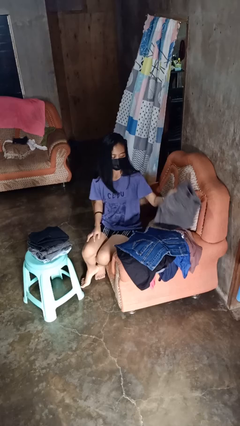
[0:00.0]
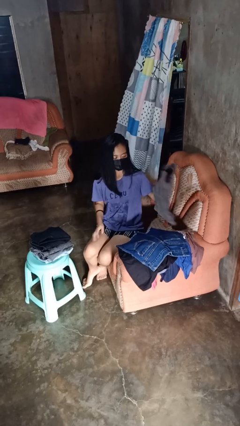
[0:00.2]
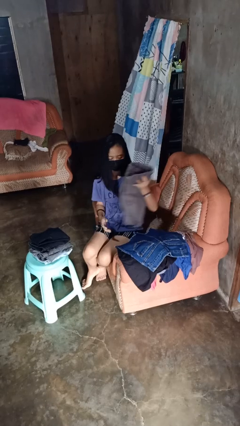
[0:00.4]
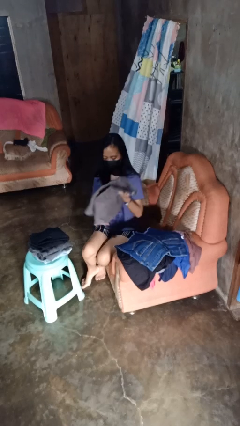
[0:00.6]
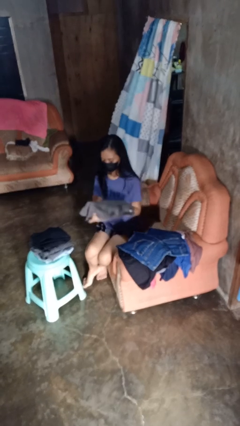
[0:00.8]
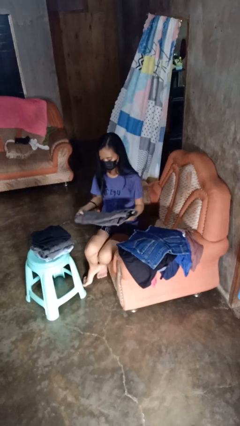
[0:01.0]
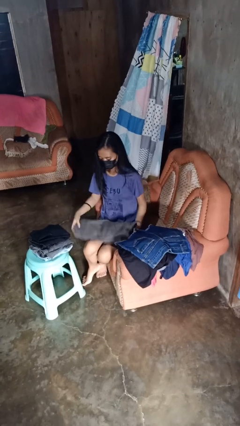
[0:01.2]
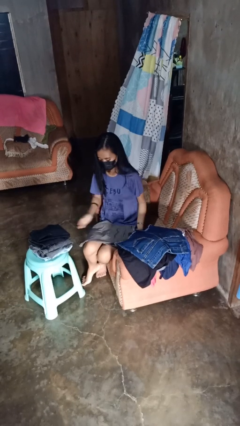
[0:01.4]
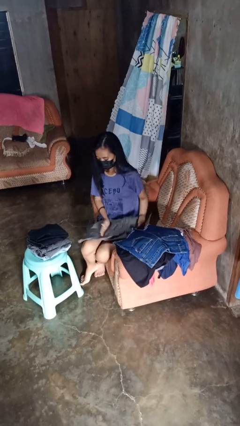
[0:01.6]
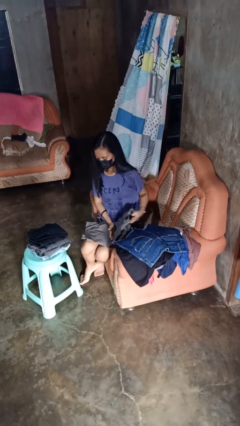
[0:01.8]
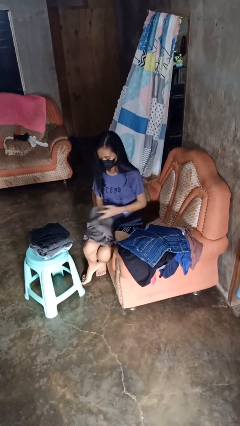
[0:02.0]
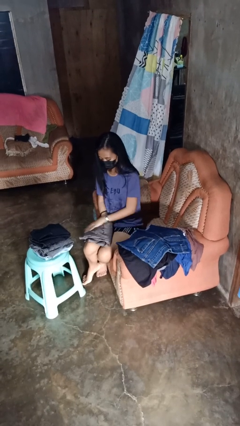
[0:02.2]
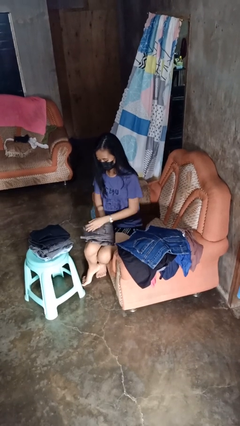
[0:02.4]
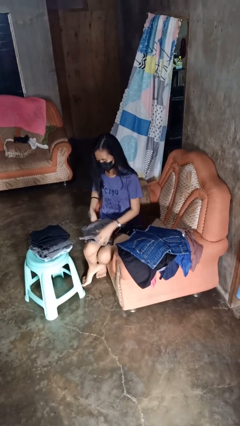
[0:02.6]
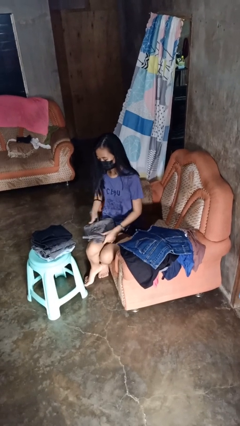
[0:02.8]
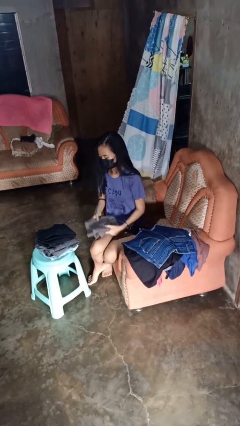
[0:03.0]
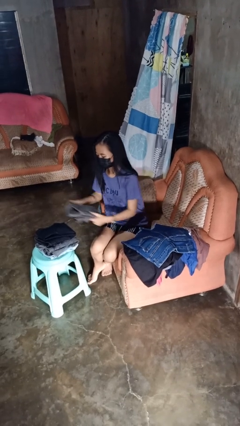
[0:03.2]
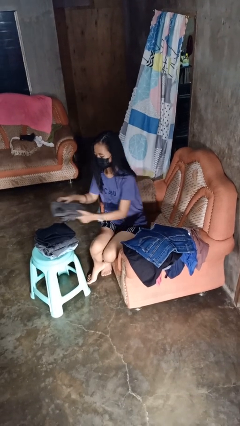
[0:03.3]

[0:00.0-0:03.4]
person folds pants

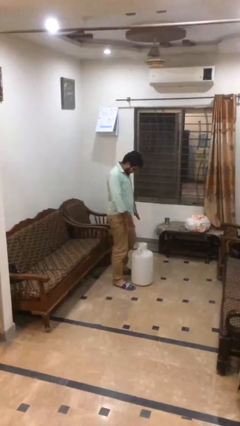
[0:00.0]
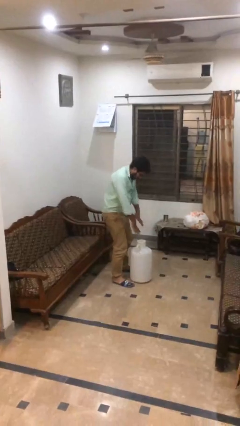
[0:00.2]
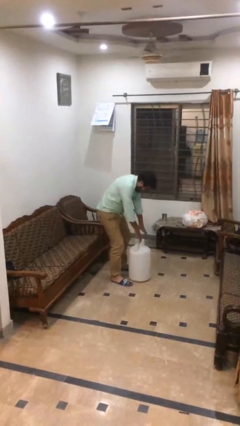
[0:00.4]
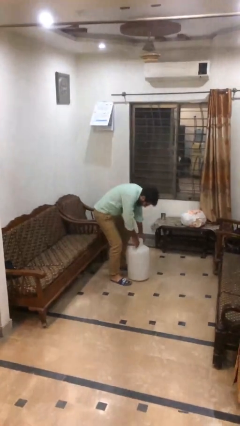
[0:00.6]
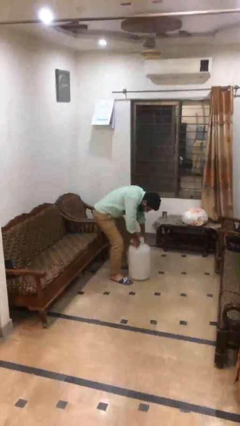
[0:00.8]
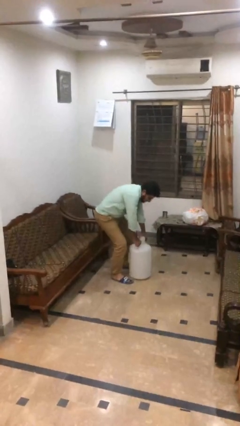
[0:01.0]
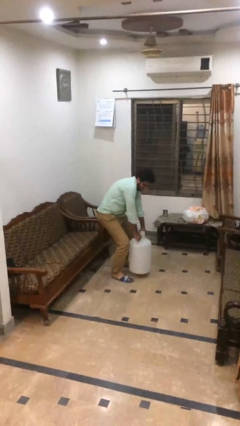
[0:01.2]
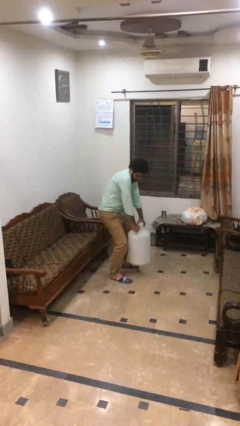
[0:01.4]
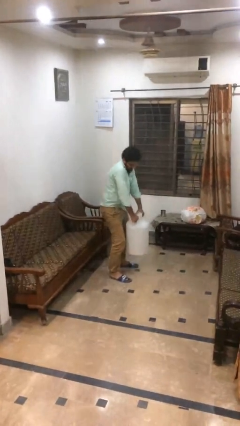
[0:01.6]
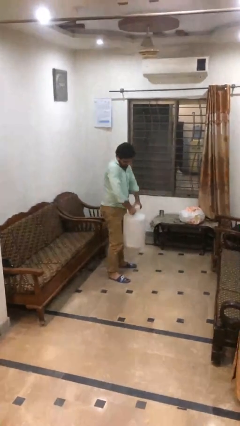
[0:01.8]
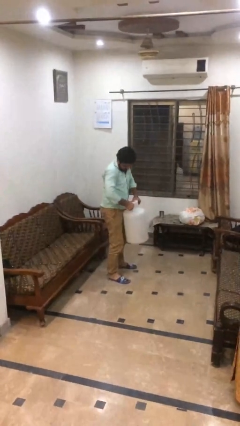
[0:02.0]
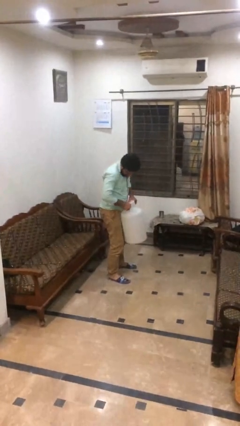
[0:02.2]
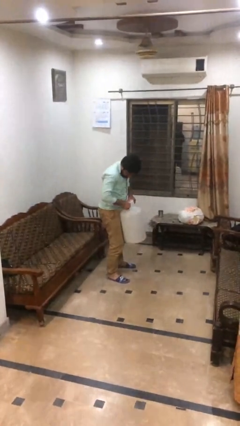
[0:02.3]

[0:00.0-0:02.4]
person picks up object from floor

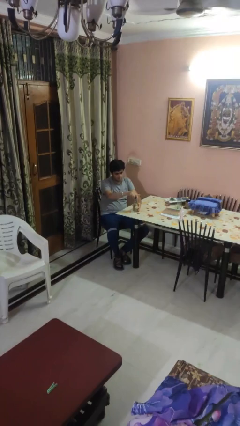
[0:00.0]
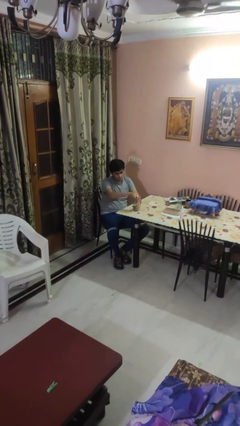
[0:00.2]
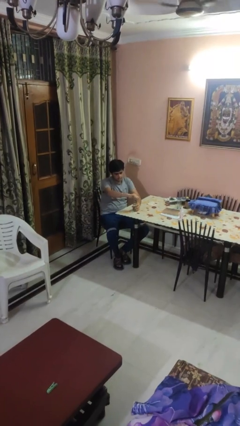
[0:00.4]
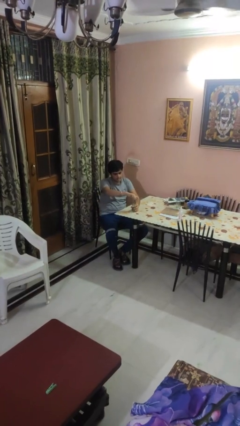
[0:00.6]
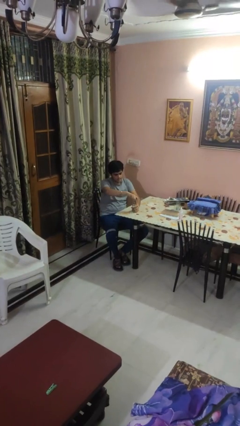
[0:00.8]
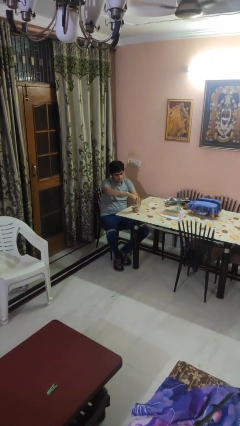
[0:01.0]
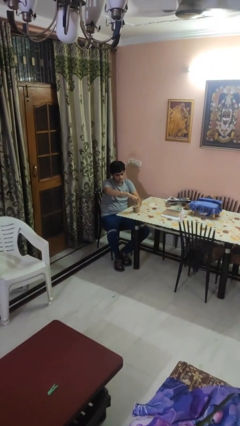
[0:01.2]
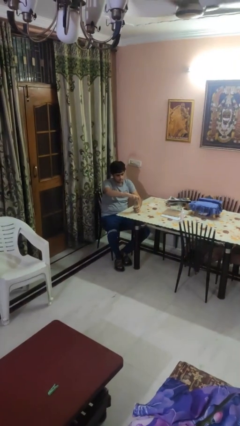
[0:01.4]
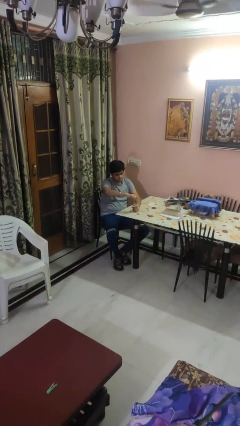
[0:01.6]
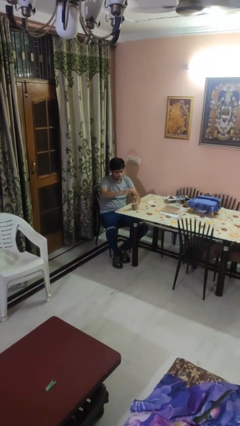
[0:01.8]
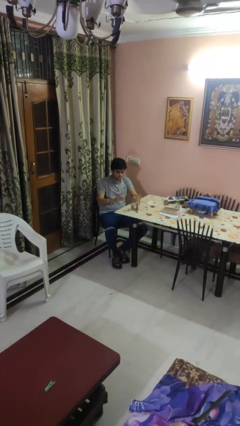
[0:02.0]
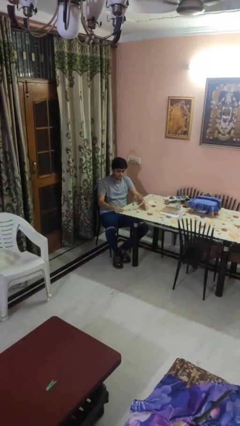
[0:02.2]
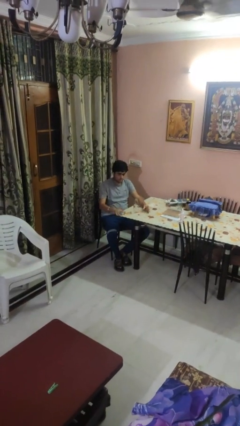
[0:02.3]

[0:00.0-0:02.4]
person unscrews lid from bottle

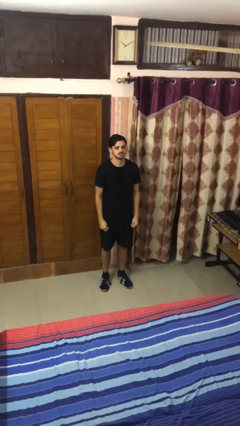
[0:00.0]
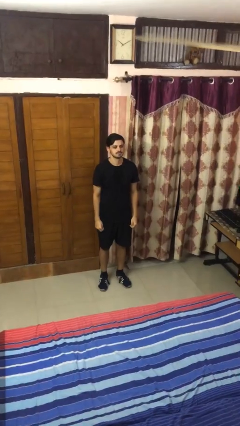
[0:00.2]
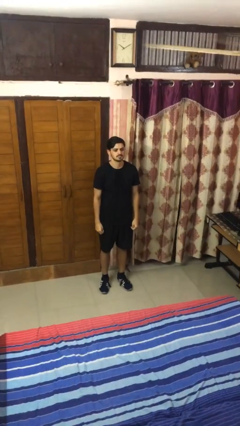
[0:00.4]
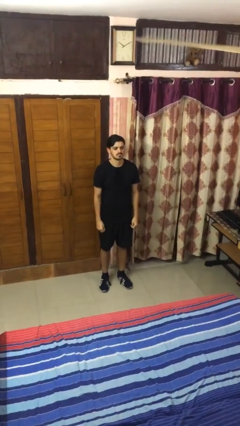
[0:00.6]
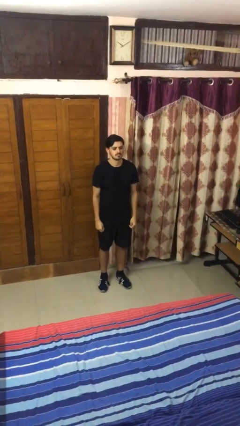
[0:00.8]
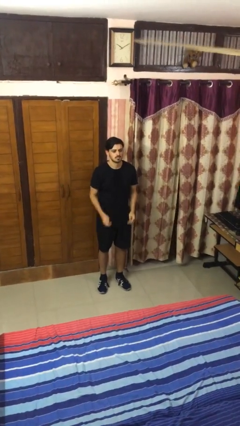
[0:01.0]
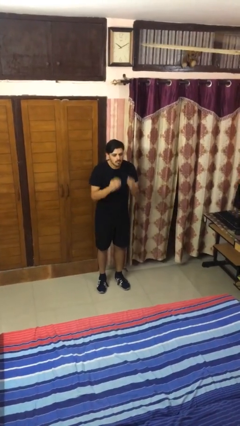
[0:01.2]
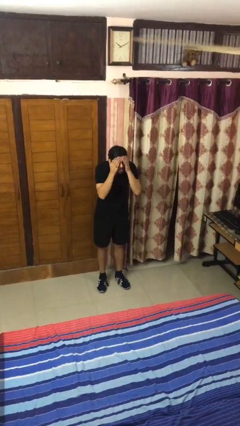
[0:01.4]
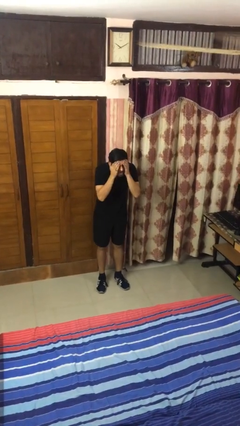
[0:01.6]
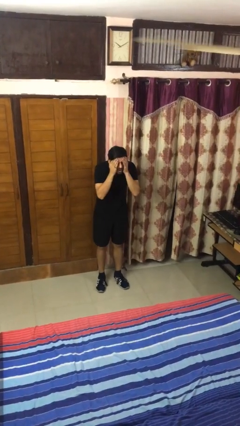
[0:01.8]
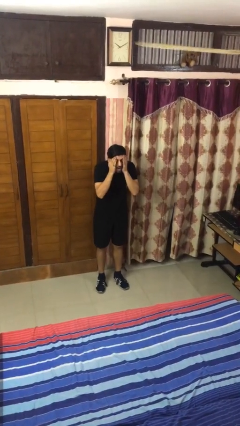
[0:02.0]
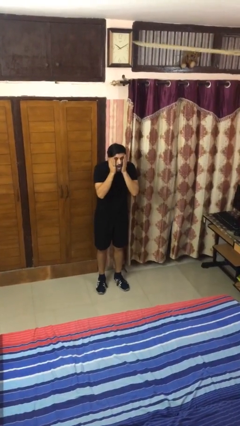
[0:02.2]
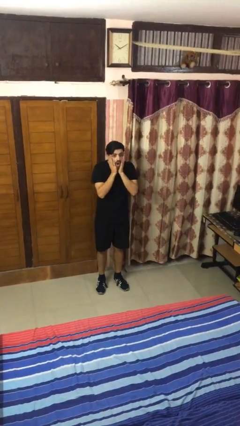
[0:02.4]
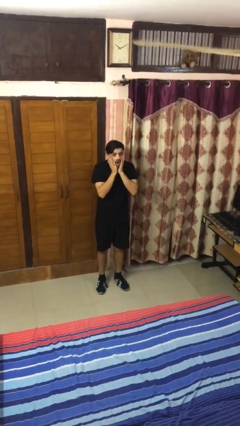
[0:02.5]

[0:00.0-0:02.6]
person covers face with hands

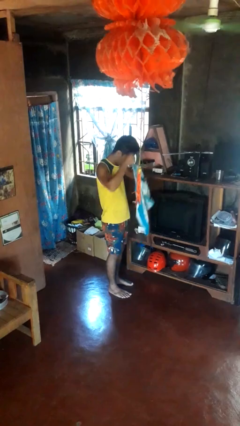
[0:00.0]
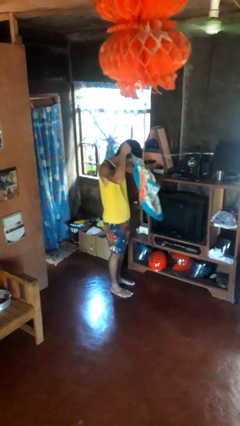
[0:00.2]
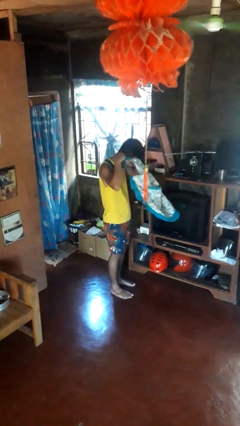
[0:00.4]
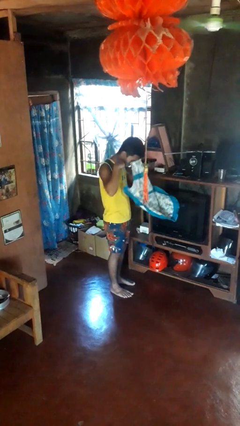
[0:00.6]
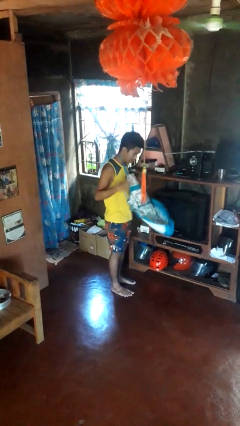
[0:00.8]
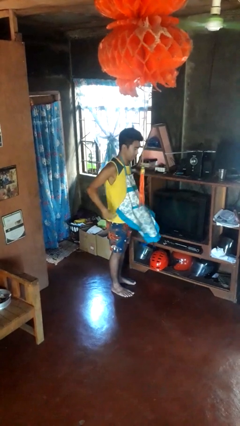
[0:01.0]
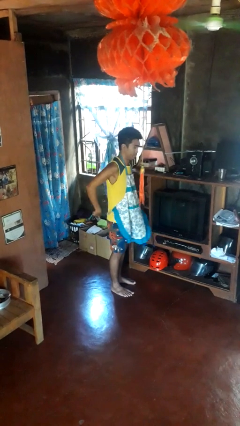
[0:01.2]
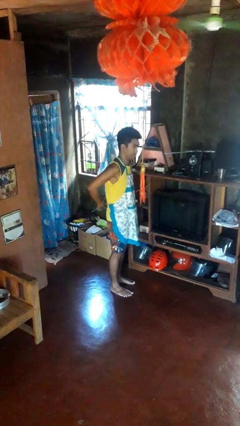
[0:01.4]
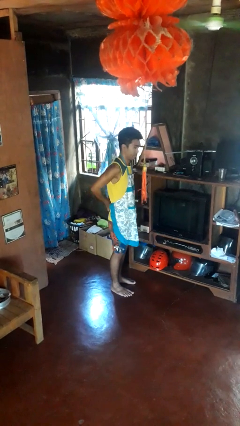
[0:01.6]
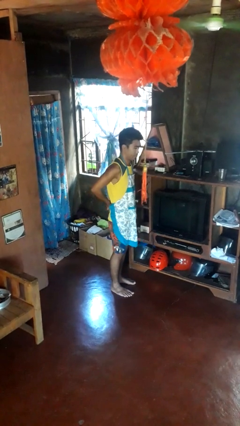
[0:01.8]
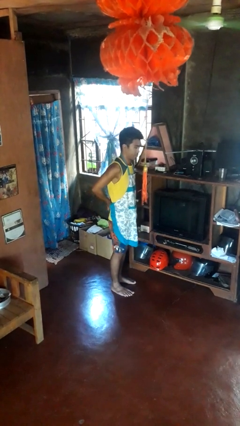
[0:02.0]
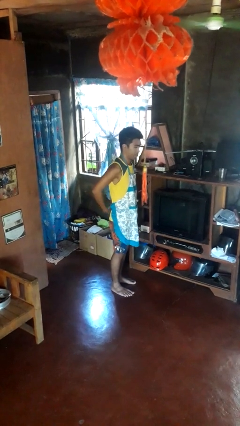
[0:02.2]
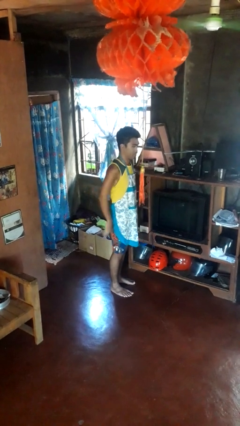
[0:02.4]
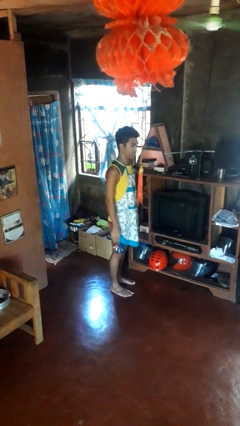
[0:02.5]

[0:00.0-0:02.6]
person puts on apron

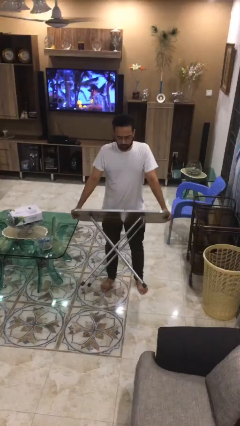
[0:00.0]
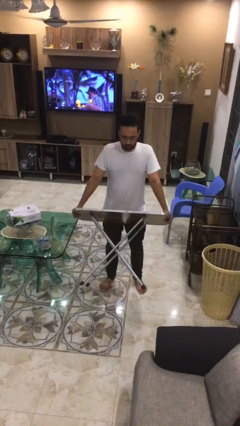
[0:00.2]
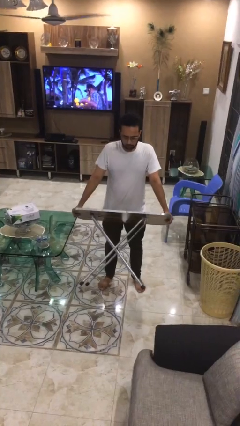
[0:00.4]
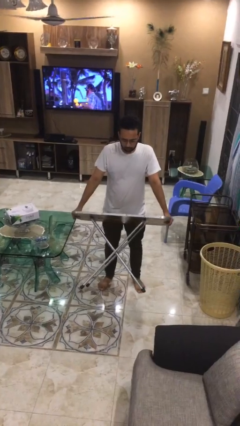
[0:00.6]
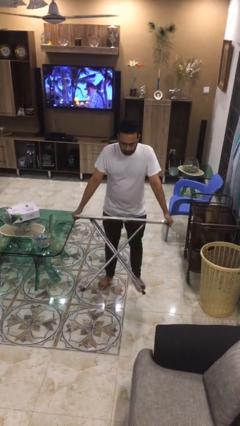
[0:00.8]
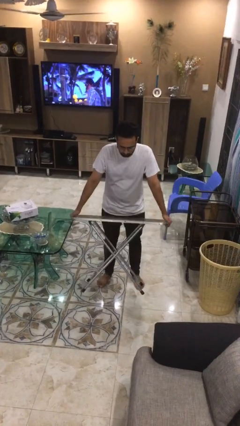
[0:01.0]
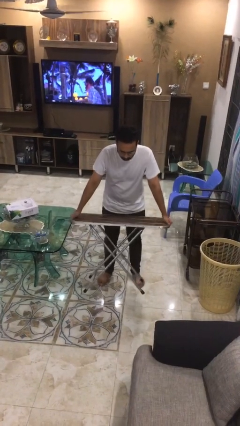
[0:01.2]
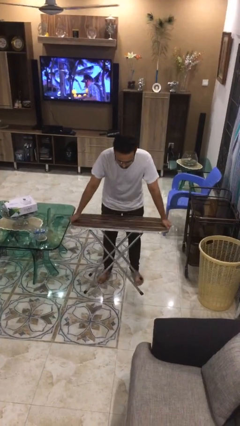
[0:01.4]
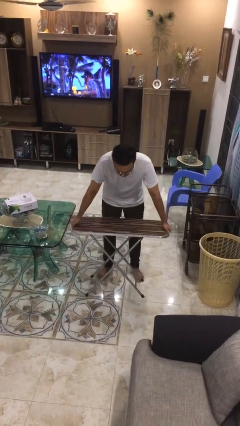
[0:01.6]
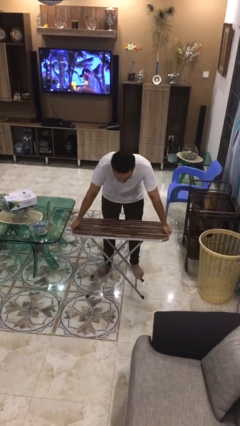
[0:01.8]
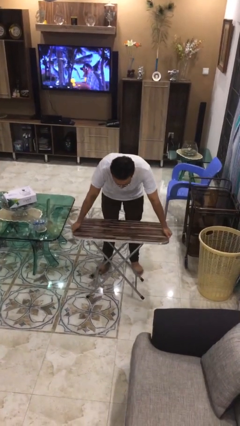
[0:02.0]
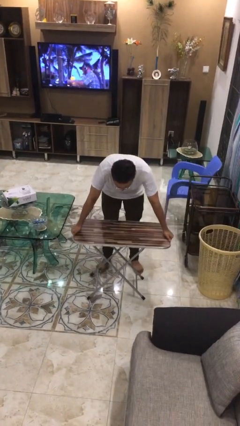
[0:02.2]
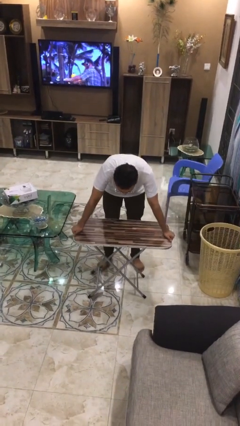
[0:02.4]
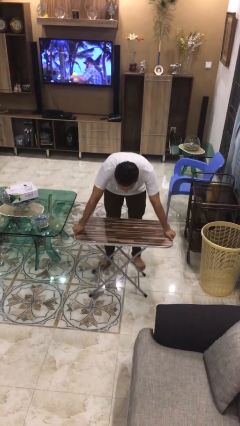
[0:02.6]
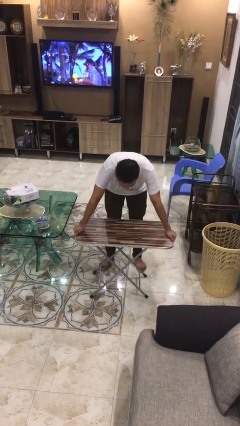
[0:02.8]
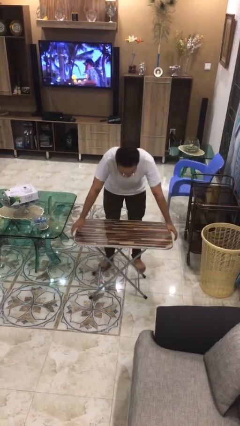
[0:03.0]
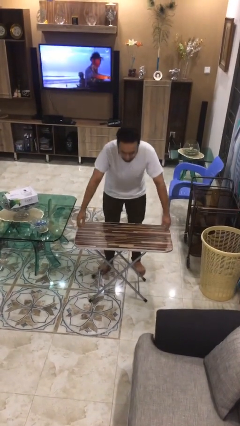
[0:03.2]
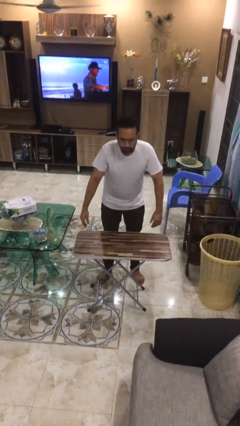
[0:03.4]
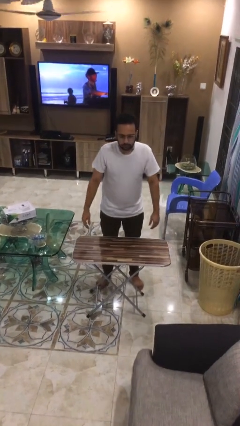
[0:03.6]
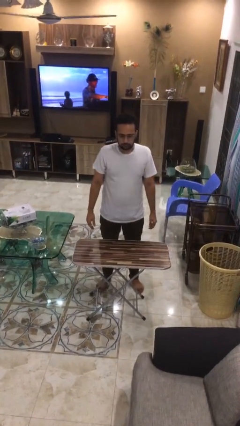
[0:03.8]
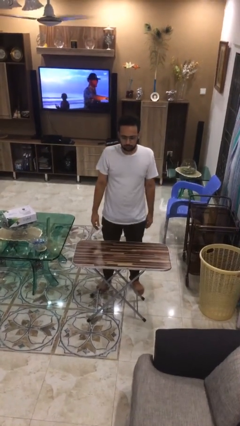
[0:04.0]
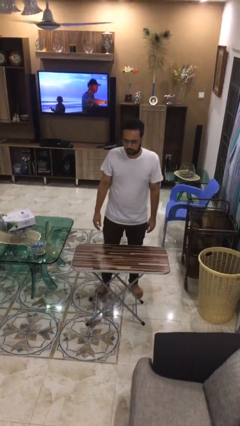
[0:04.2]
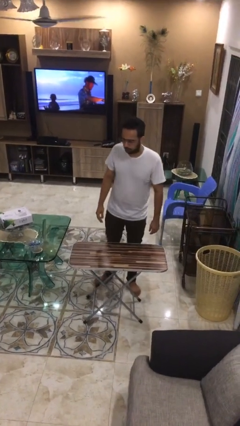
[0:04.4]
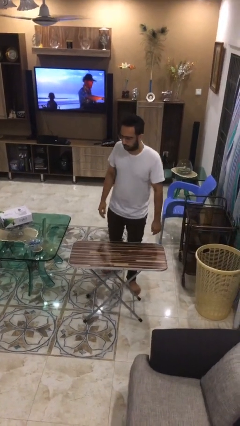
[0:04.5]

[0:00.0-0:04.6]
person puts down object on floor
